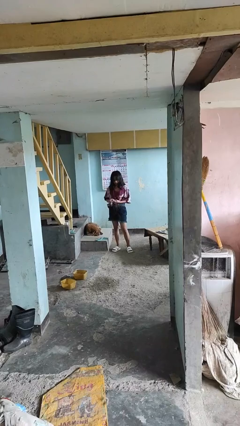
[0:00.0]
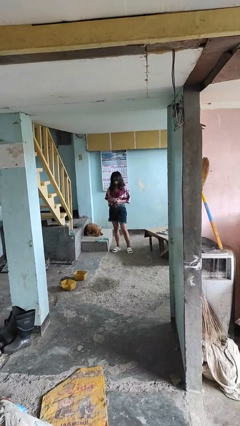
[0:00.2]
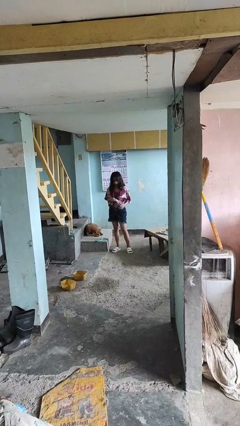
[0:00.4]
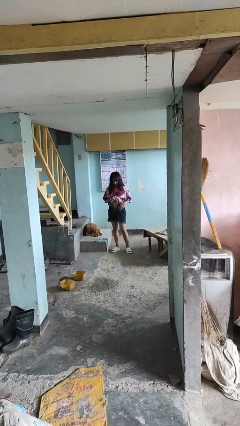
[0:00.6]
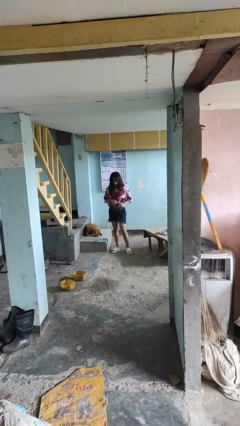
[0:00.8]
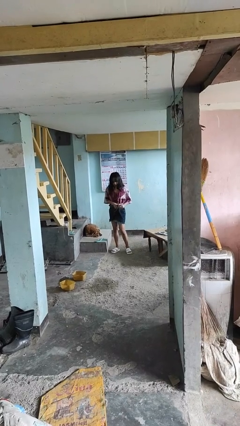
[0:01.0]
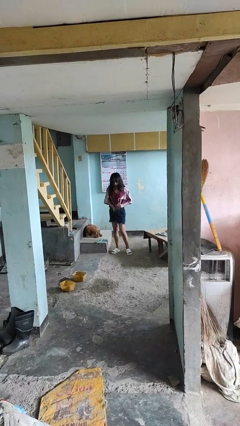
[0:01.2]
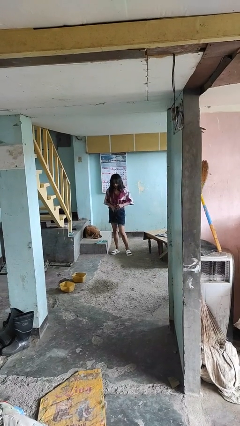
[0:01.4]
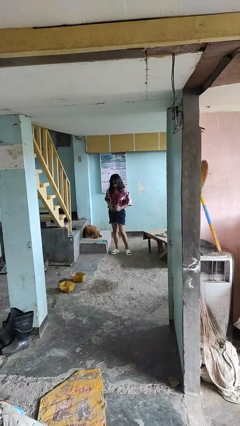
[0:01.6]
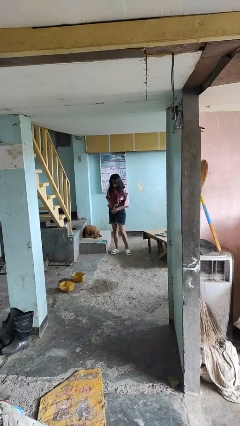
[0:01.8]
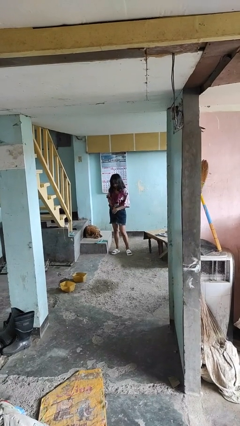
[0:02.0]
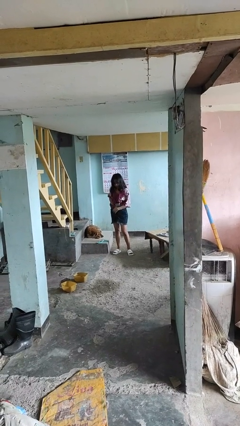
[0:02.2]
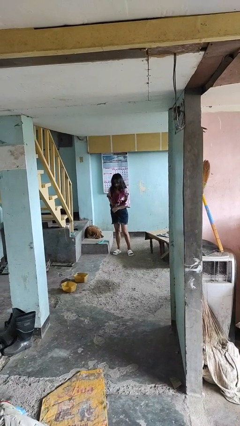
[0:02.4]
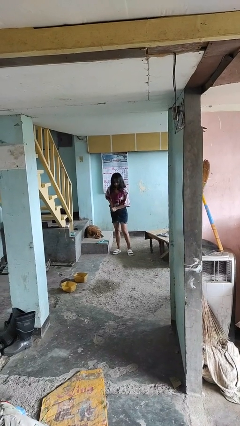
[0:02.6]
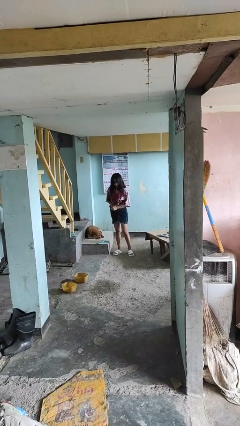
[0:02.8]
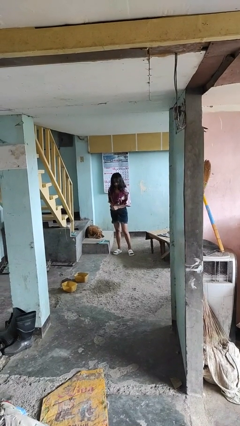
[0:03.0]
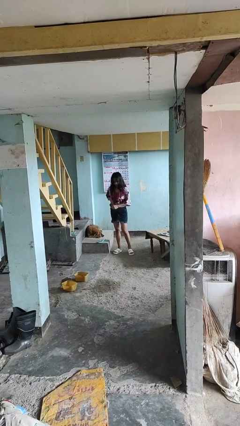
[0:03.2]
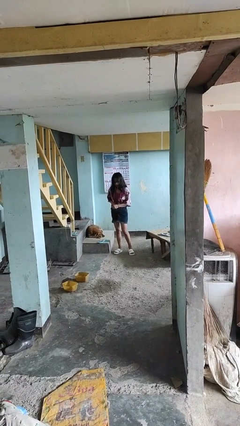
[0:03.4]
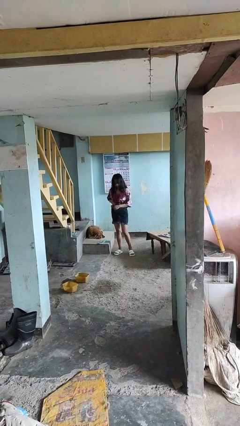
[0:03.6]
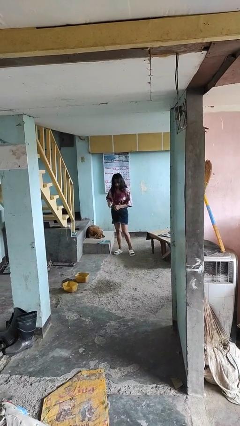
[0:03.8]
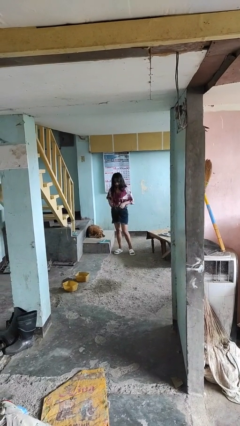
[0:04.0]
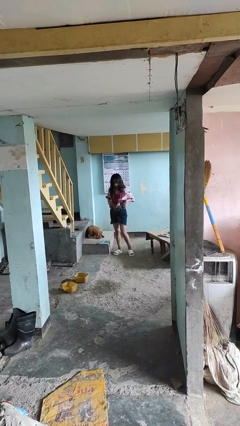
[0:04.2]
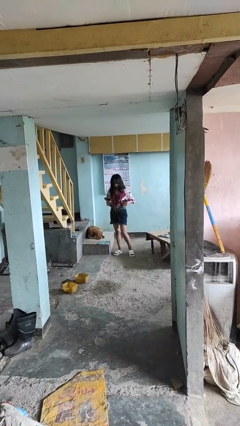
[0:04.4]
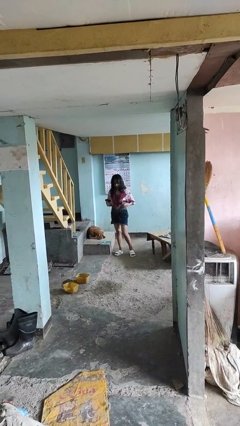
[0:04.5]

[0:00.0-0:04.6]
person tucks in shirt

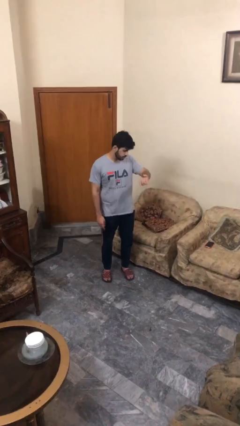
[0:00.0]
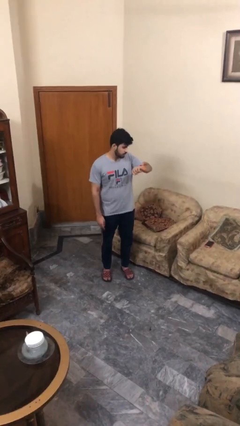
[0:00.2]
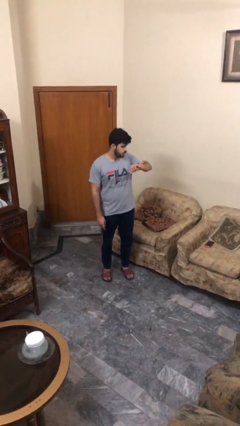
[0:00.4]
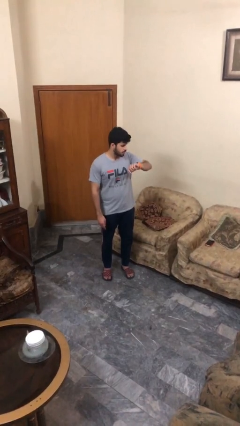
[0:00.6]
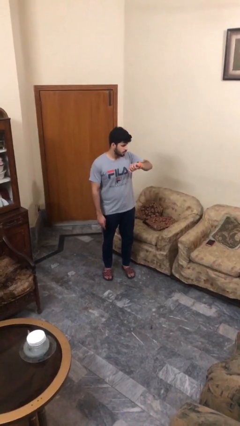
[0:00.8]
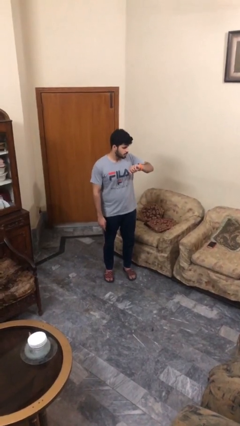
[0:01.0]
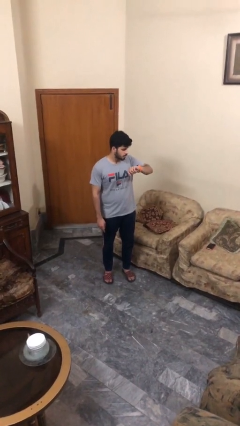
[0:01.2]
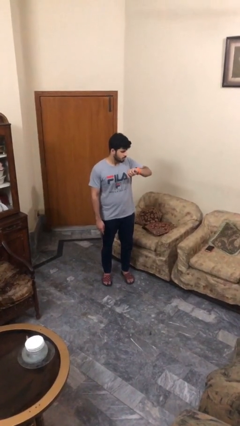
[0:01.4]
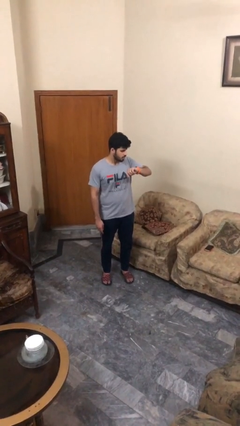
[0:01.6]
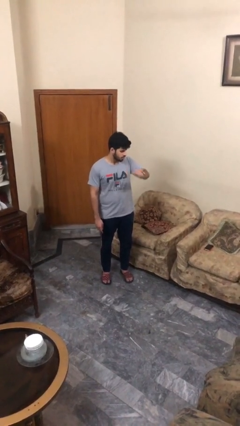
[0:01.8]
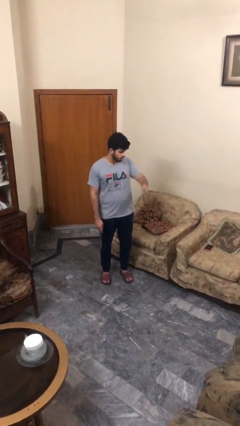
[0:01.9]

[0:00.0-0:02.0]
person looks at wristwatch

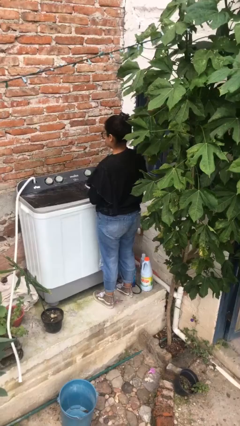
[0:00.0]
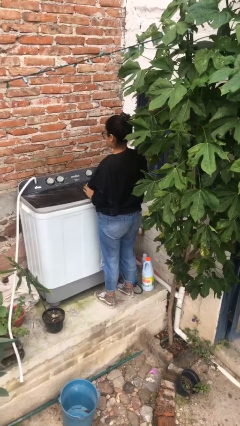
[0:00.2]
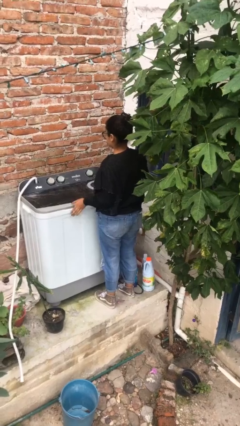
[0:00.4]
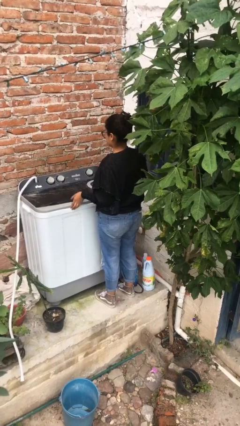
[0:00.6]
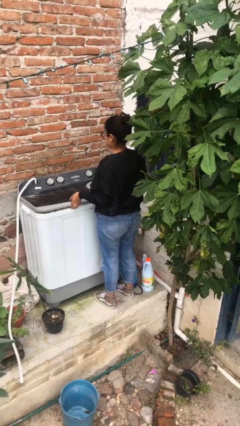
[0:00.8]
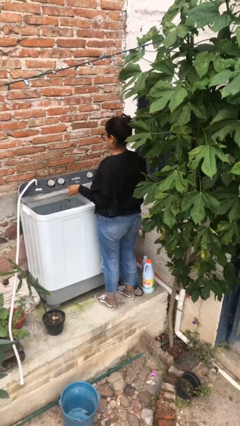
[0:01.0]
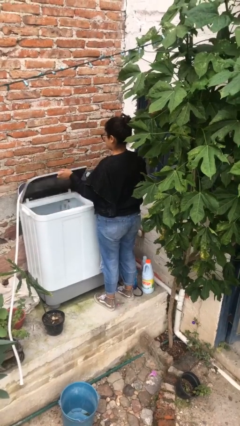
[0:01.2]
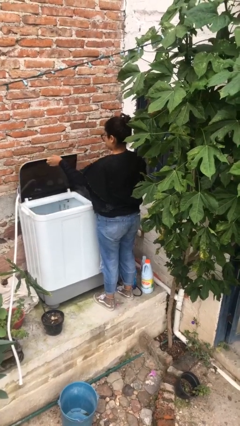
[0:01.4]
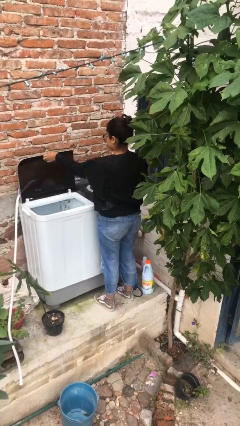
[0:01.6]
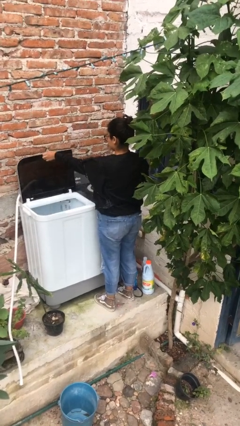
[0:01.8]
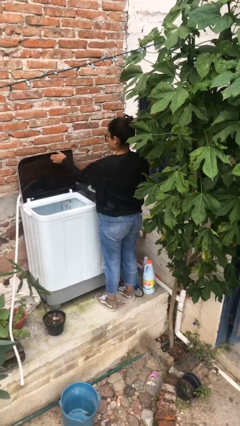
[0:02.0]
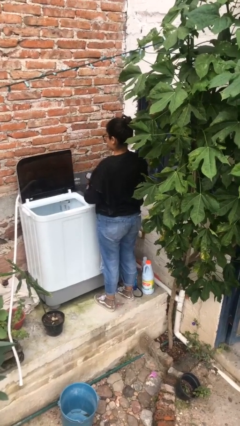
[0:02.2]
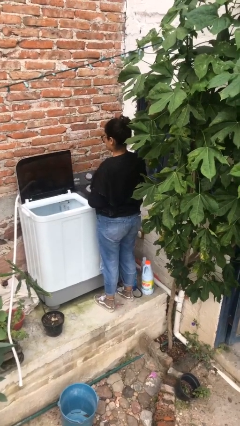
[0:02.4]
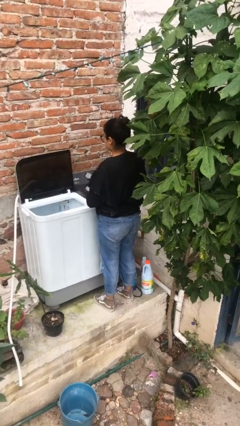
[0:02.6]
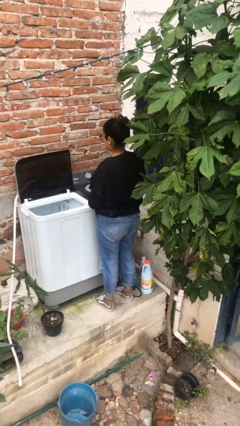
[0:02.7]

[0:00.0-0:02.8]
person opens clothes washer

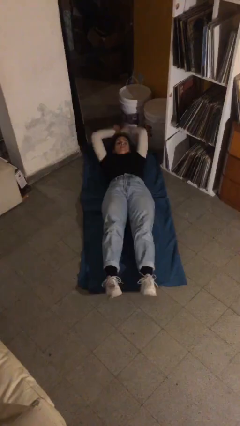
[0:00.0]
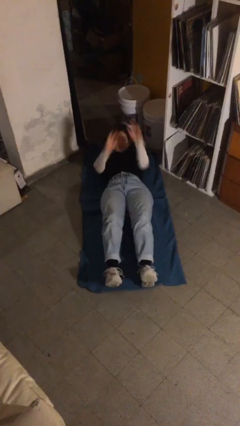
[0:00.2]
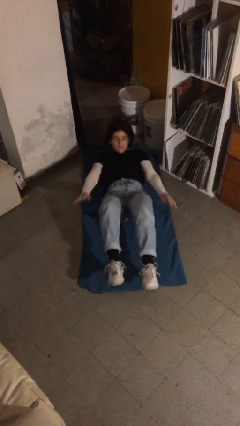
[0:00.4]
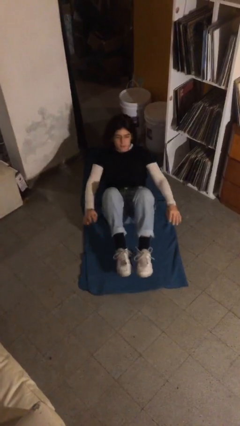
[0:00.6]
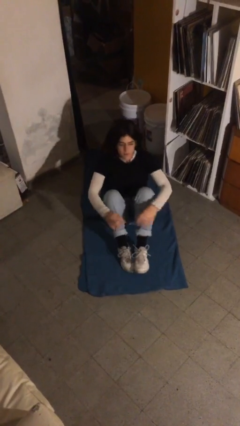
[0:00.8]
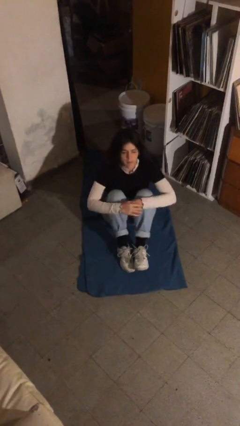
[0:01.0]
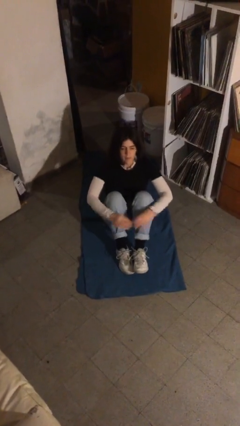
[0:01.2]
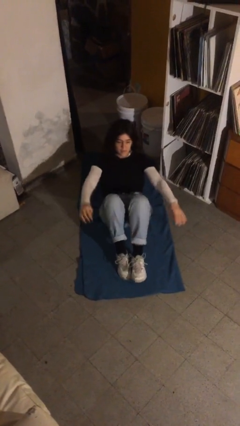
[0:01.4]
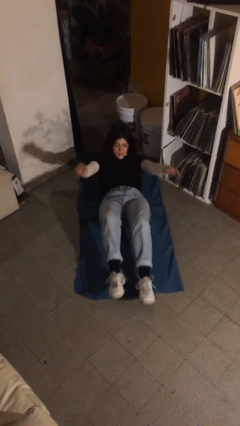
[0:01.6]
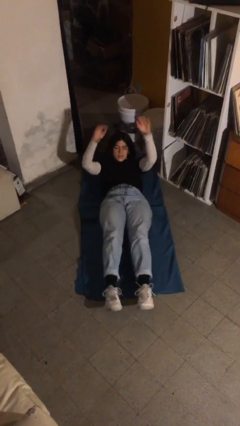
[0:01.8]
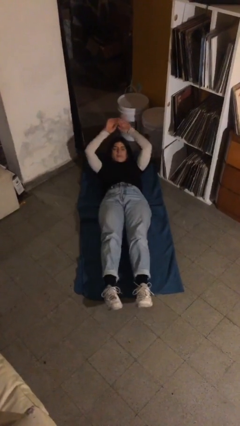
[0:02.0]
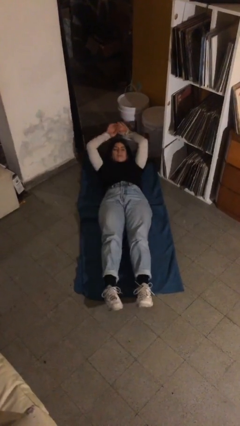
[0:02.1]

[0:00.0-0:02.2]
person exercises with situp

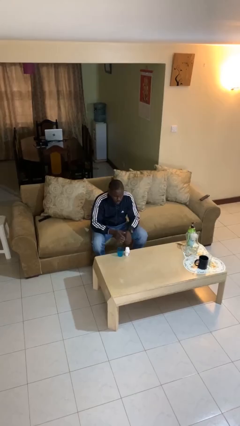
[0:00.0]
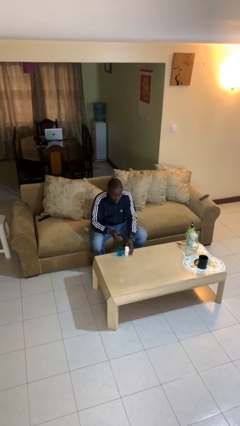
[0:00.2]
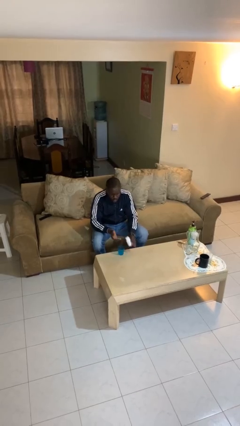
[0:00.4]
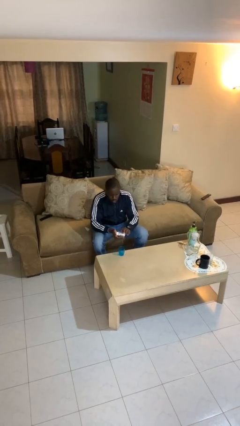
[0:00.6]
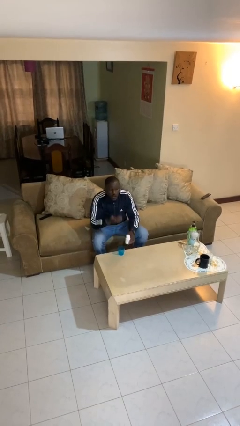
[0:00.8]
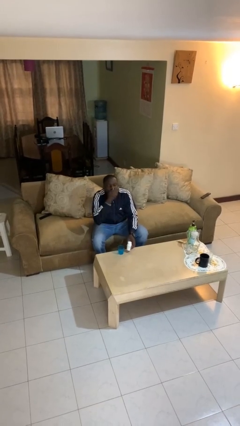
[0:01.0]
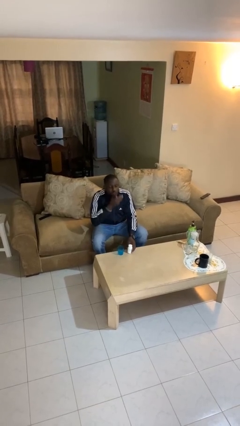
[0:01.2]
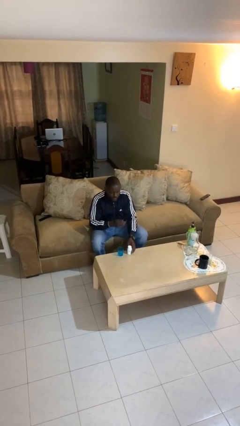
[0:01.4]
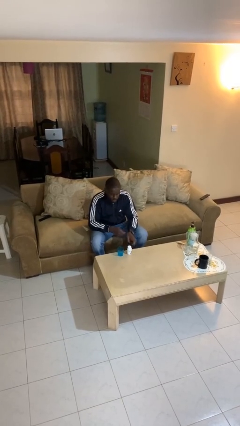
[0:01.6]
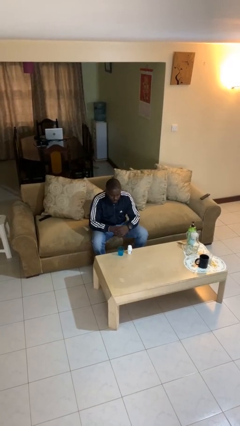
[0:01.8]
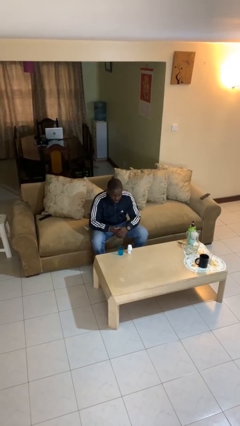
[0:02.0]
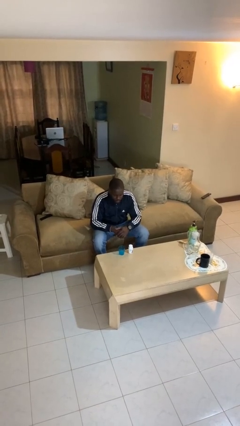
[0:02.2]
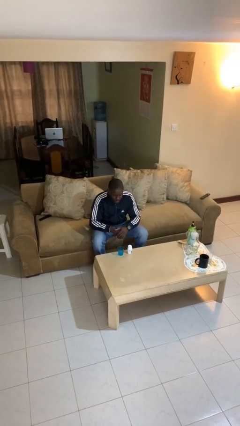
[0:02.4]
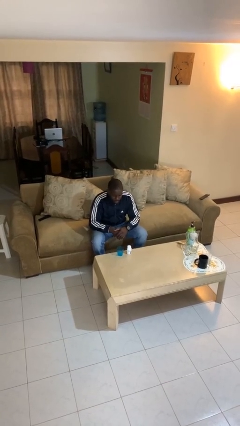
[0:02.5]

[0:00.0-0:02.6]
person takes medicine pills

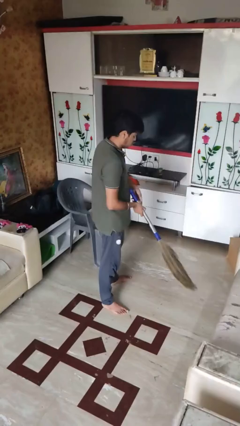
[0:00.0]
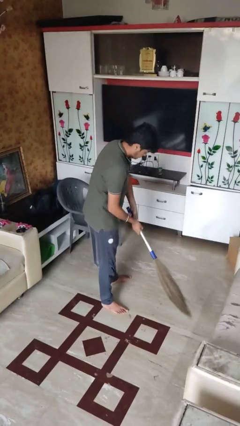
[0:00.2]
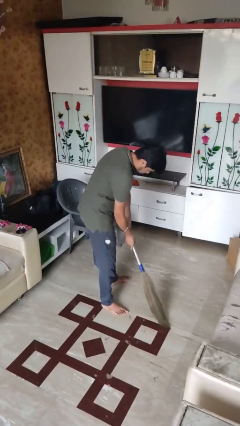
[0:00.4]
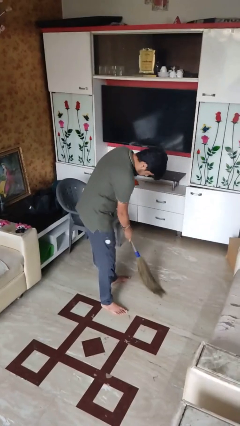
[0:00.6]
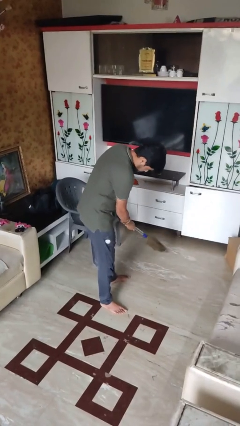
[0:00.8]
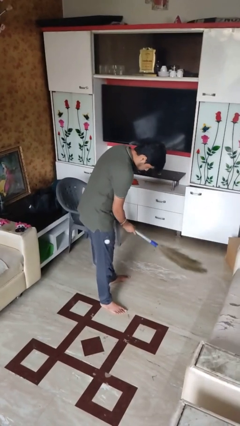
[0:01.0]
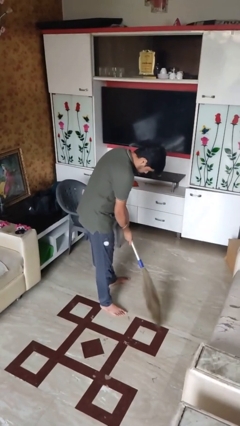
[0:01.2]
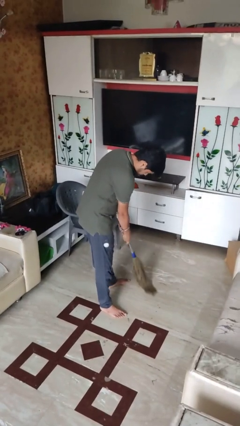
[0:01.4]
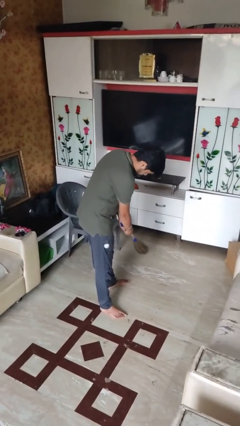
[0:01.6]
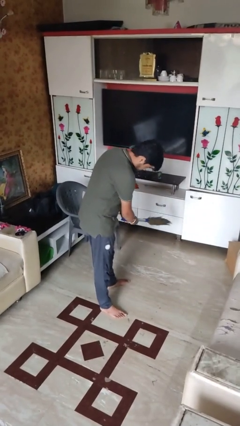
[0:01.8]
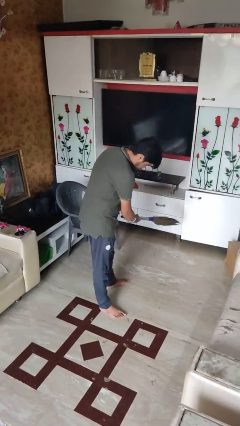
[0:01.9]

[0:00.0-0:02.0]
person sweeps floor

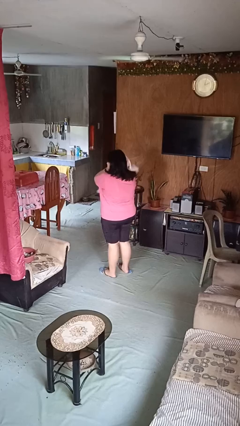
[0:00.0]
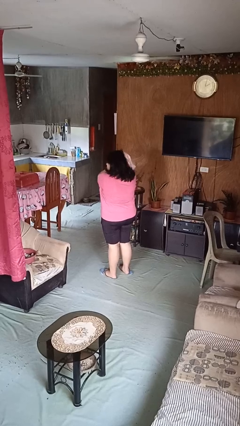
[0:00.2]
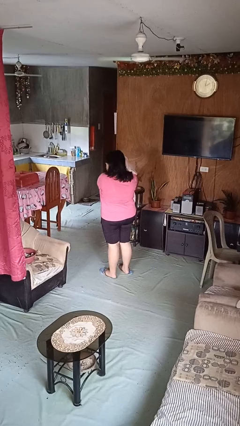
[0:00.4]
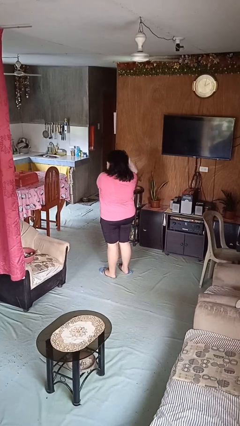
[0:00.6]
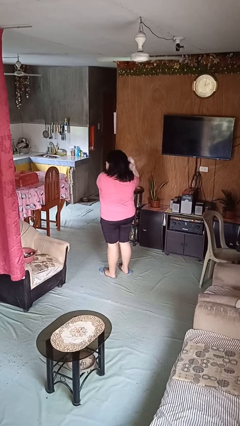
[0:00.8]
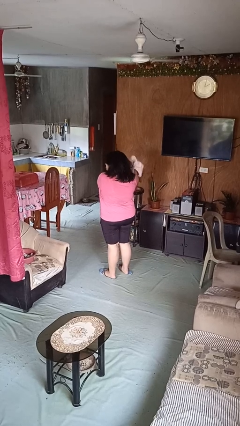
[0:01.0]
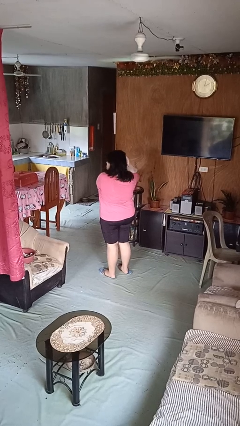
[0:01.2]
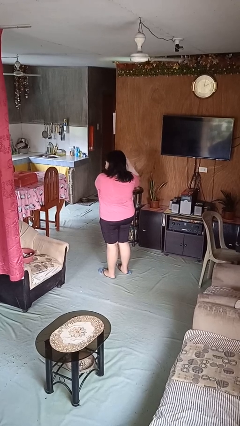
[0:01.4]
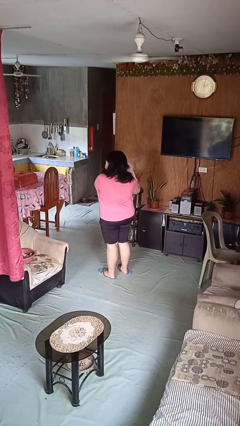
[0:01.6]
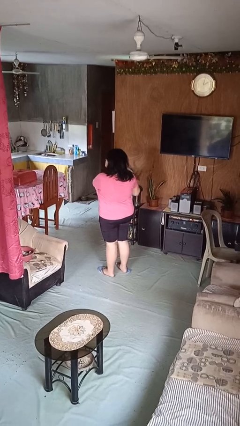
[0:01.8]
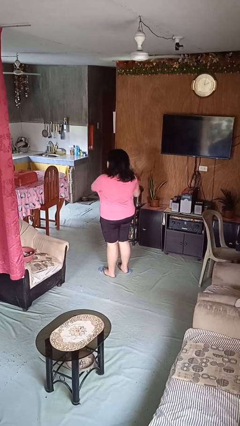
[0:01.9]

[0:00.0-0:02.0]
person dries hair with towel
